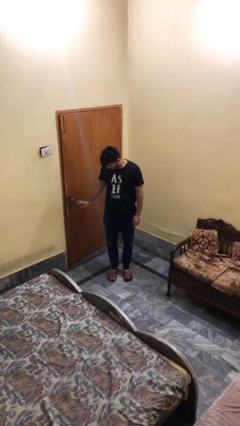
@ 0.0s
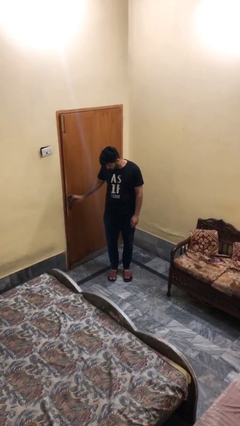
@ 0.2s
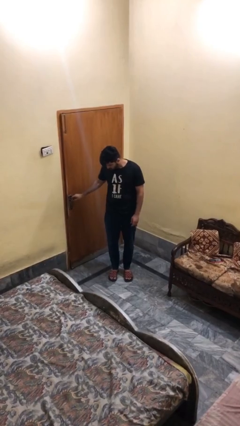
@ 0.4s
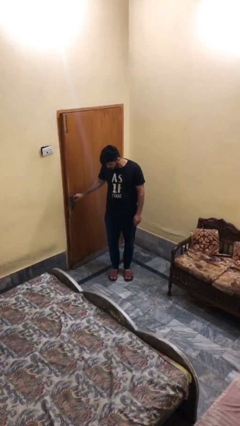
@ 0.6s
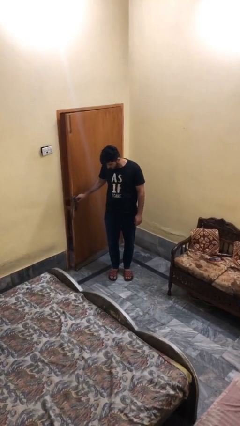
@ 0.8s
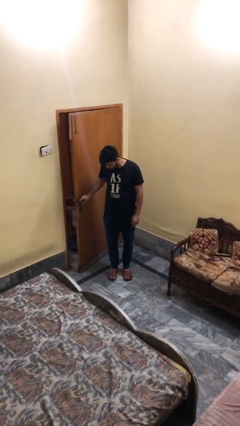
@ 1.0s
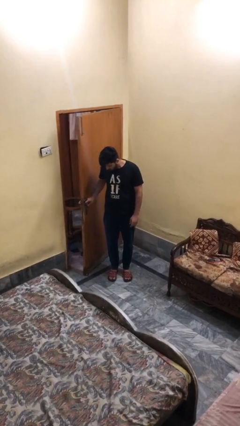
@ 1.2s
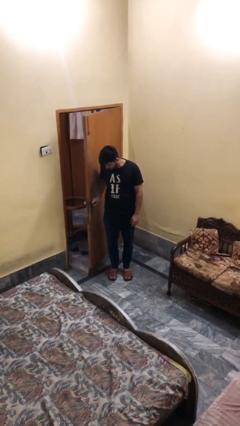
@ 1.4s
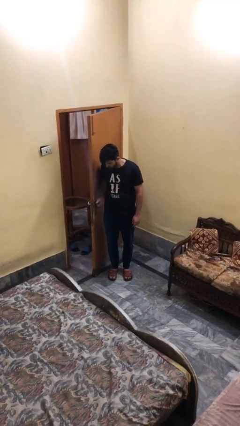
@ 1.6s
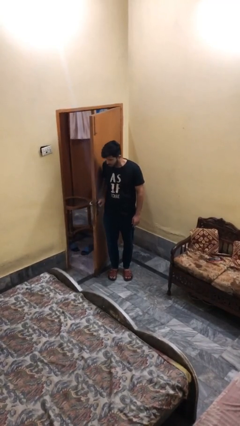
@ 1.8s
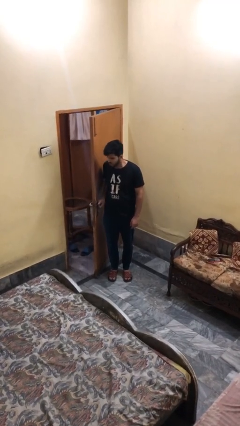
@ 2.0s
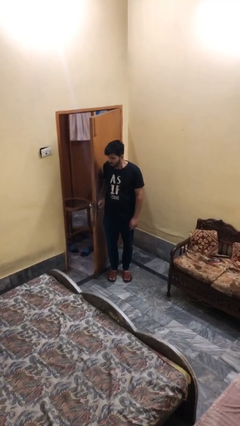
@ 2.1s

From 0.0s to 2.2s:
person opens facility door

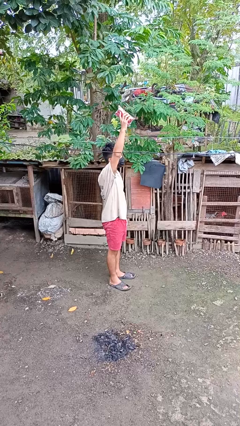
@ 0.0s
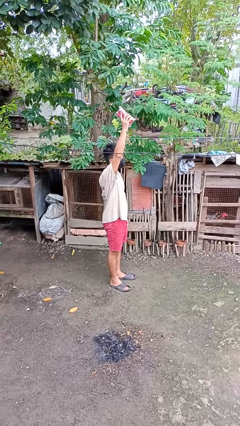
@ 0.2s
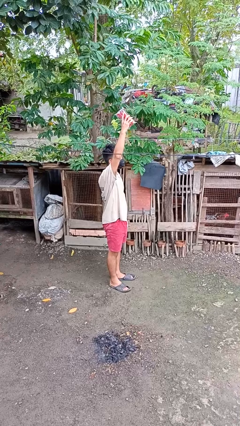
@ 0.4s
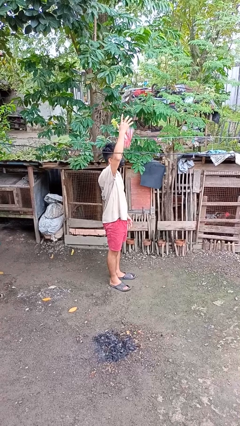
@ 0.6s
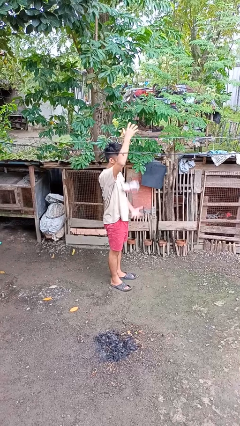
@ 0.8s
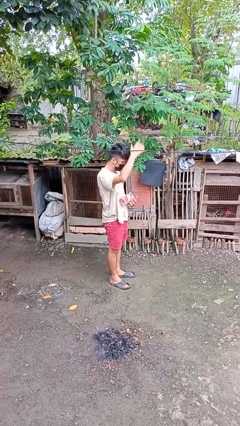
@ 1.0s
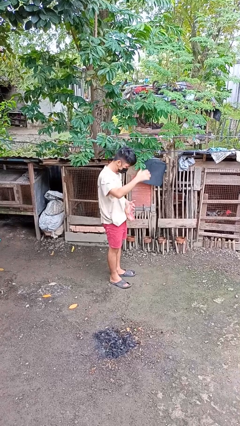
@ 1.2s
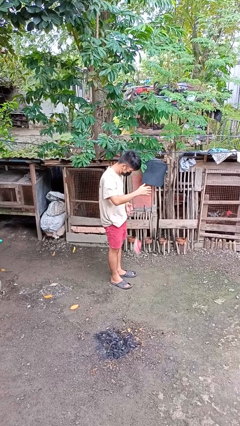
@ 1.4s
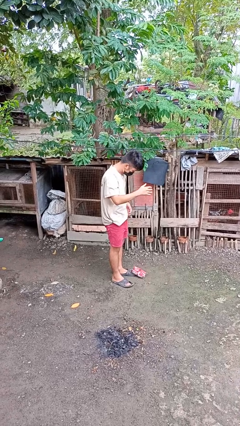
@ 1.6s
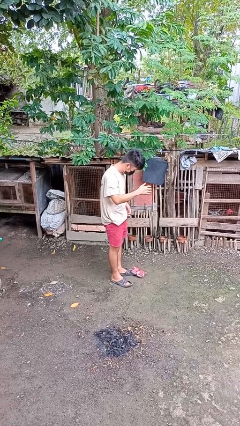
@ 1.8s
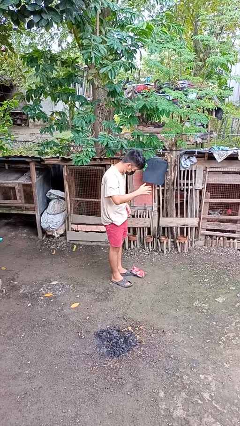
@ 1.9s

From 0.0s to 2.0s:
person drops object

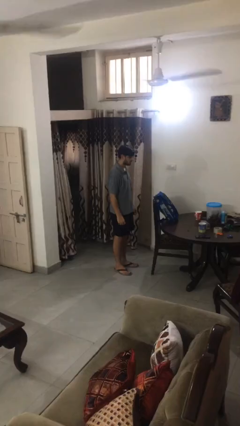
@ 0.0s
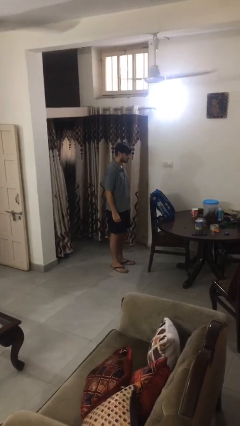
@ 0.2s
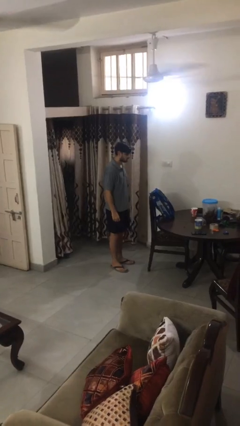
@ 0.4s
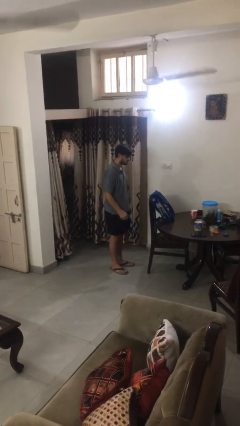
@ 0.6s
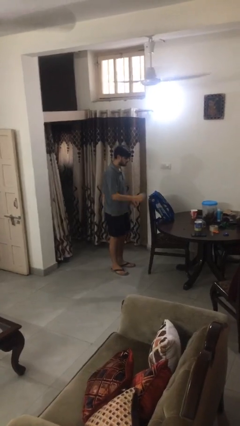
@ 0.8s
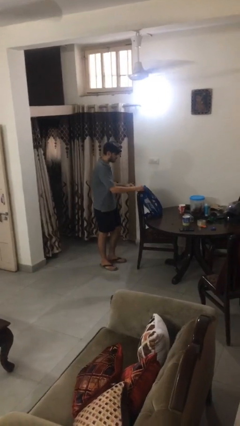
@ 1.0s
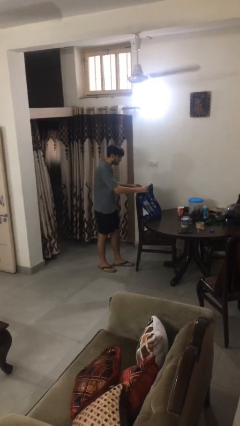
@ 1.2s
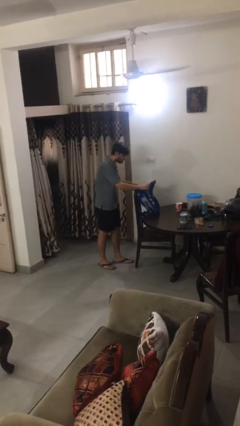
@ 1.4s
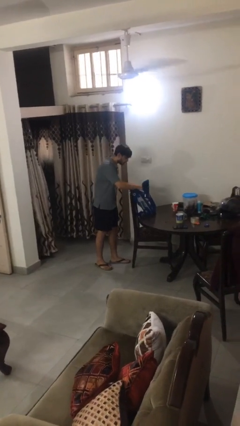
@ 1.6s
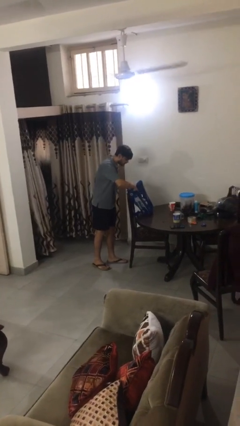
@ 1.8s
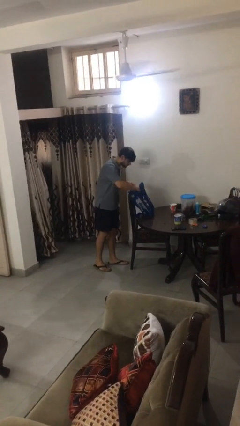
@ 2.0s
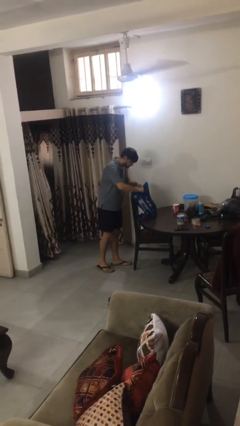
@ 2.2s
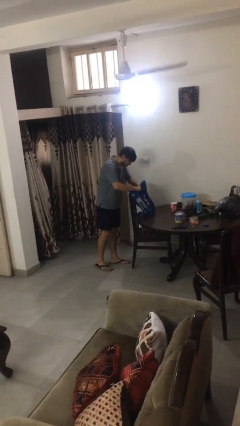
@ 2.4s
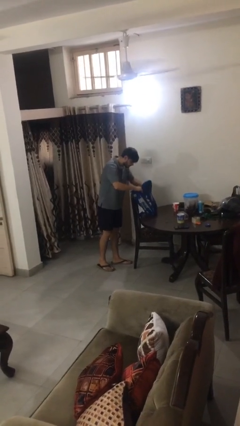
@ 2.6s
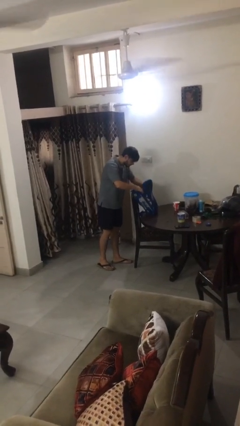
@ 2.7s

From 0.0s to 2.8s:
person searches in backpack

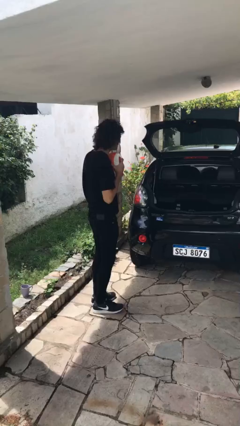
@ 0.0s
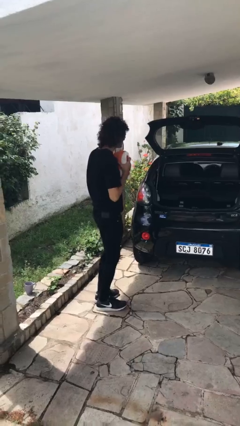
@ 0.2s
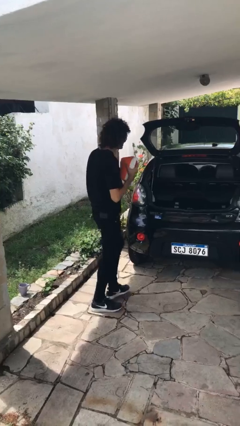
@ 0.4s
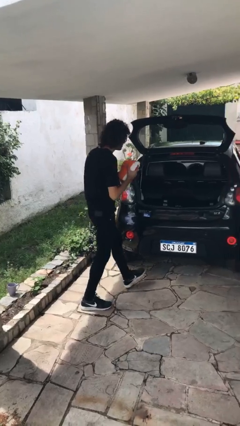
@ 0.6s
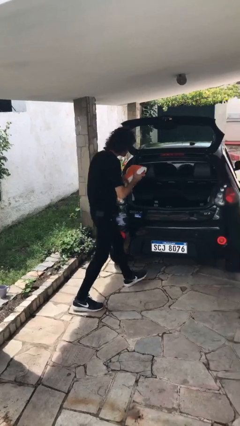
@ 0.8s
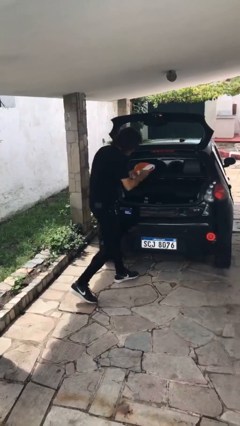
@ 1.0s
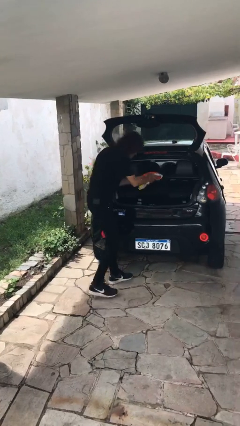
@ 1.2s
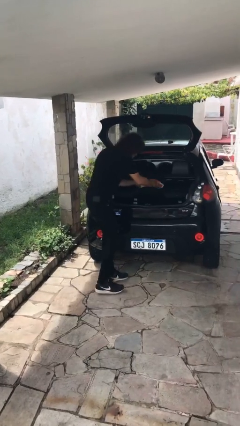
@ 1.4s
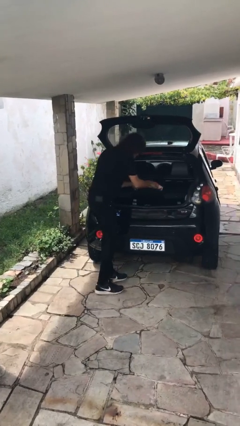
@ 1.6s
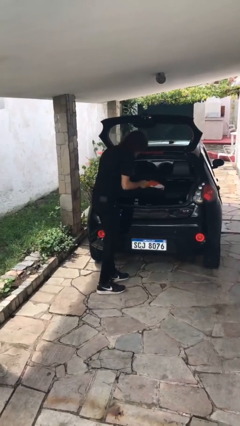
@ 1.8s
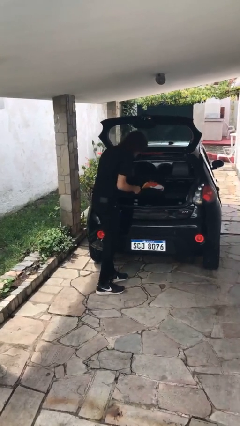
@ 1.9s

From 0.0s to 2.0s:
person loads car

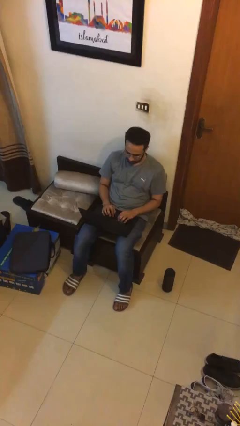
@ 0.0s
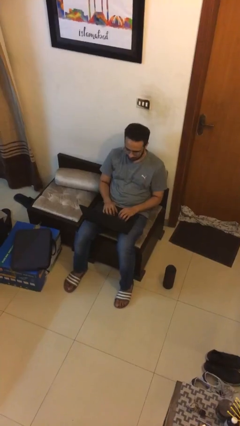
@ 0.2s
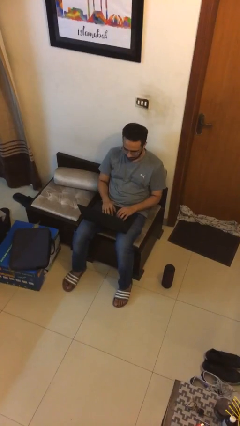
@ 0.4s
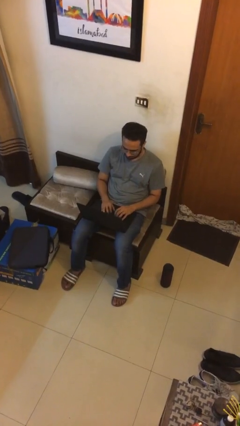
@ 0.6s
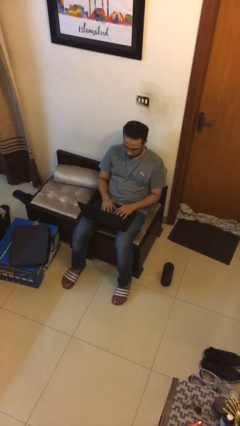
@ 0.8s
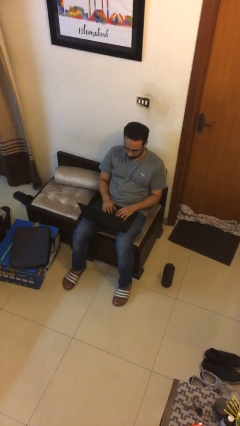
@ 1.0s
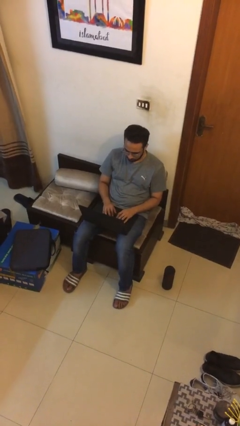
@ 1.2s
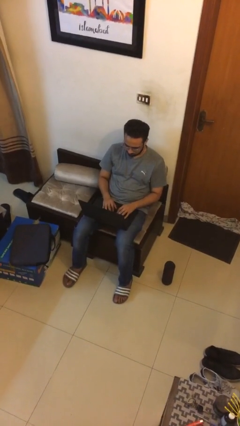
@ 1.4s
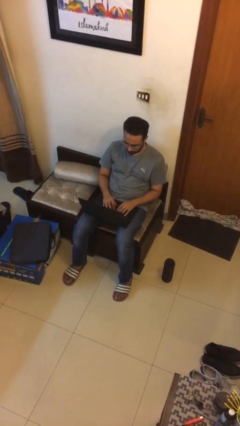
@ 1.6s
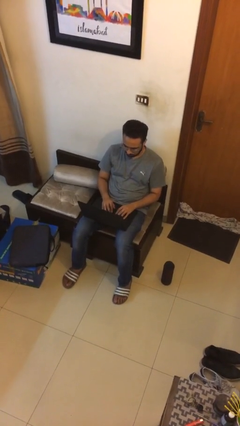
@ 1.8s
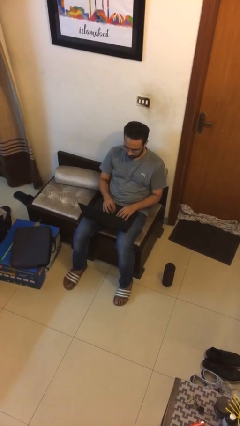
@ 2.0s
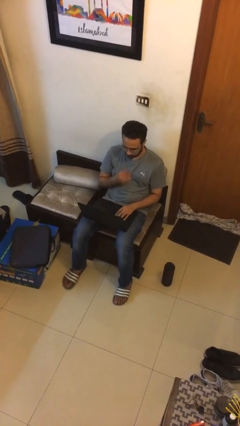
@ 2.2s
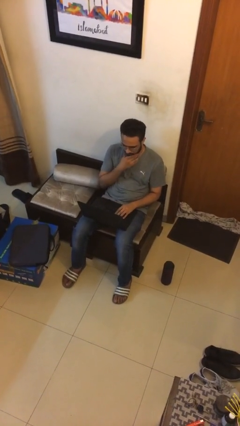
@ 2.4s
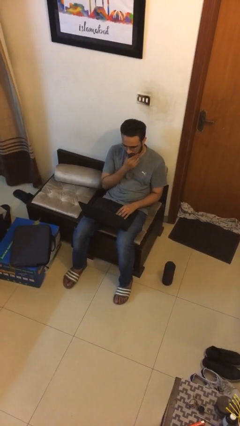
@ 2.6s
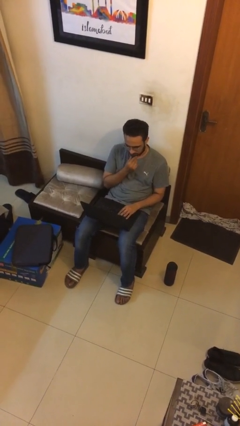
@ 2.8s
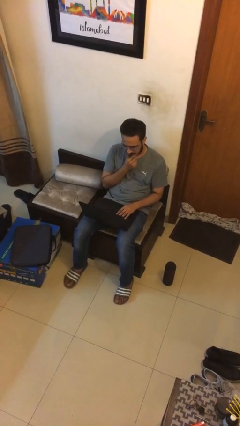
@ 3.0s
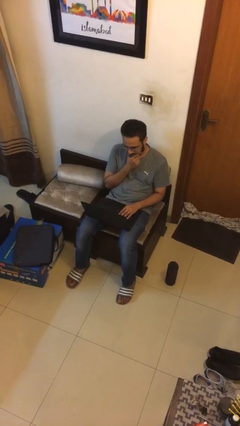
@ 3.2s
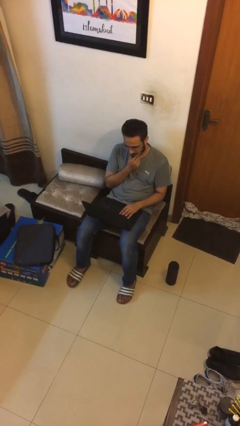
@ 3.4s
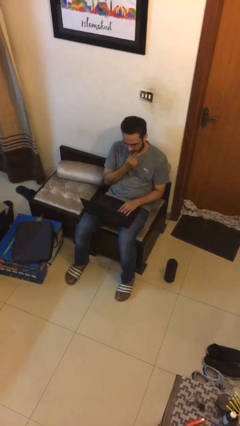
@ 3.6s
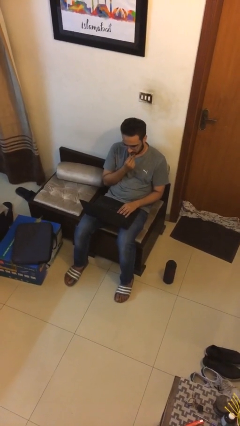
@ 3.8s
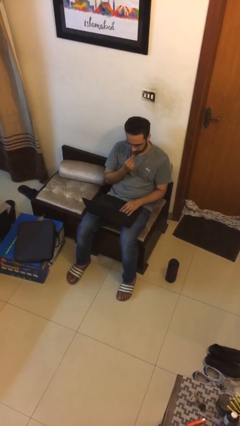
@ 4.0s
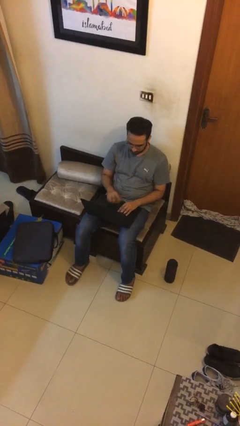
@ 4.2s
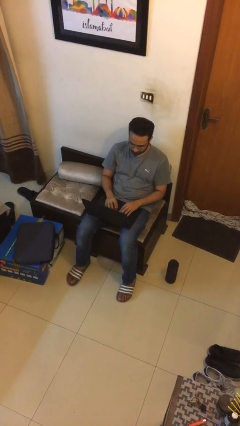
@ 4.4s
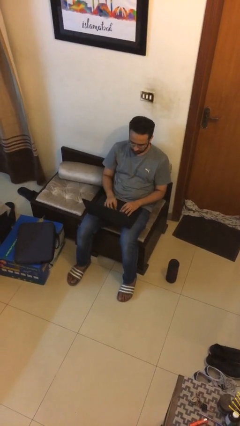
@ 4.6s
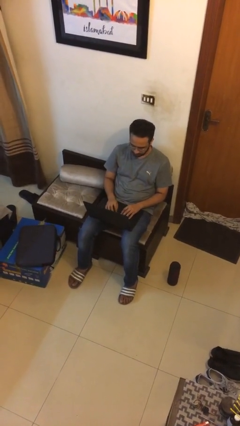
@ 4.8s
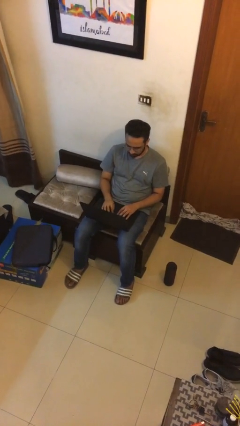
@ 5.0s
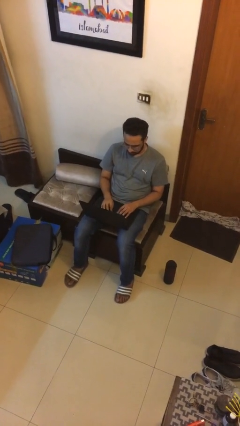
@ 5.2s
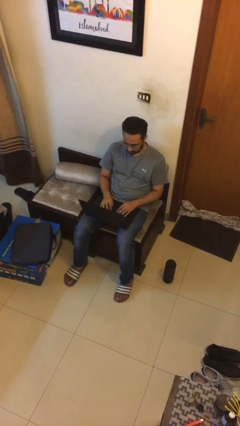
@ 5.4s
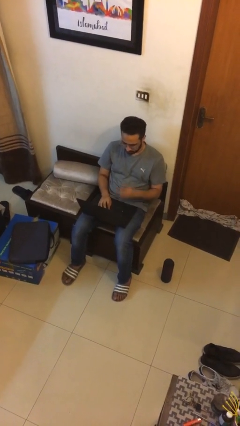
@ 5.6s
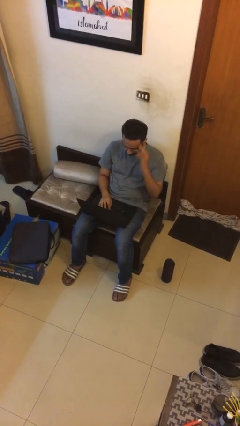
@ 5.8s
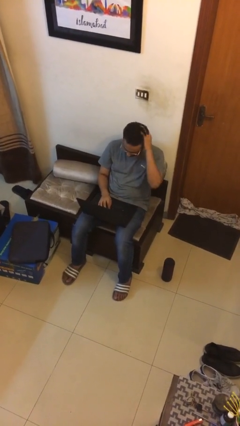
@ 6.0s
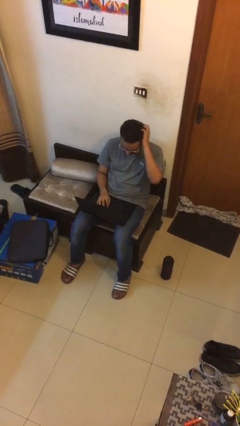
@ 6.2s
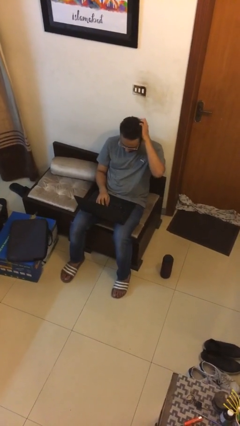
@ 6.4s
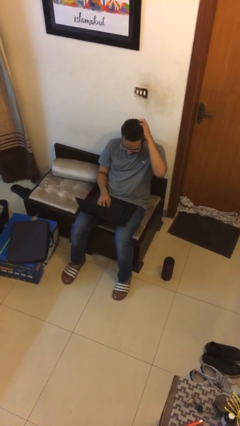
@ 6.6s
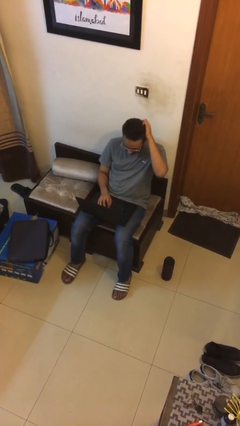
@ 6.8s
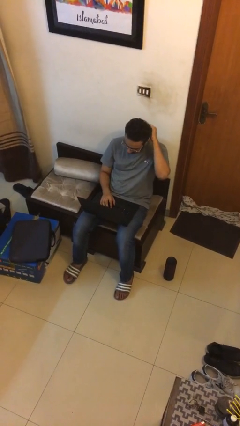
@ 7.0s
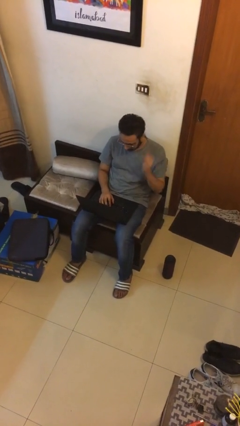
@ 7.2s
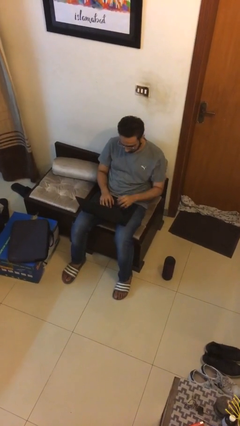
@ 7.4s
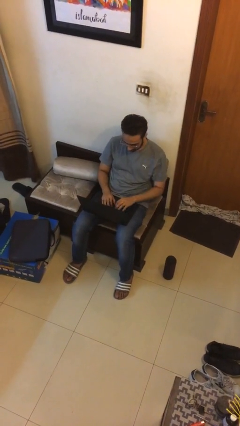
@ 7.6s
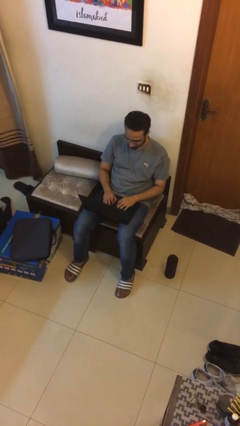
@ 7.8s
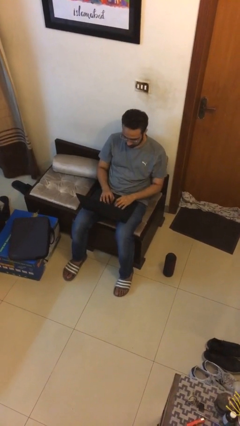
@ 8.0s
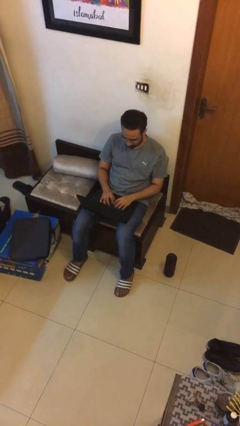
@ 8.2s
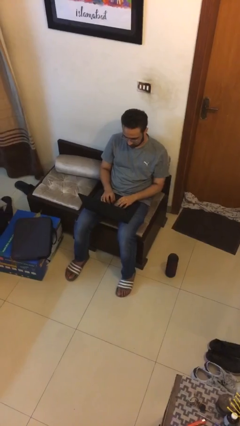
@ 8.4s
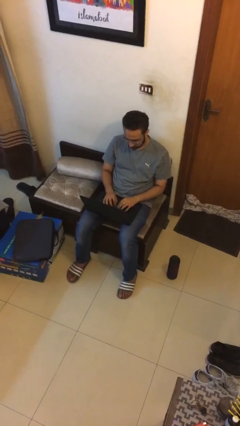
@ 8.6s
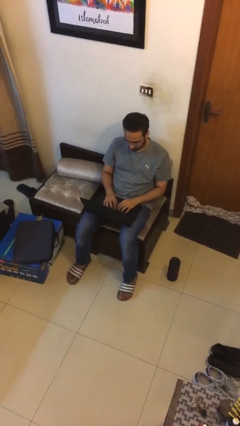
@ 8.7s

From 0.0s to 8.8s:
person interacts with laptop
